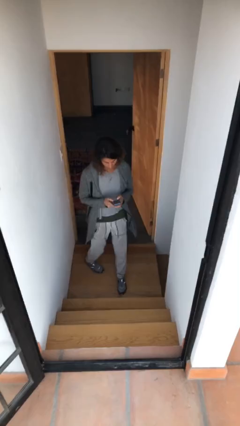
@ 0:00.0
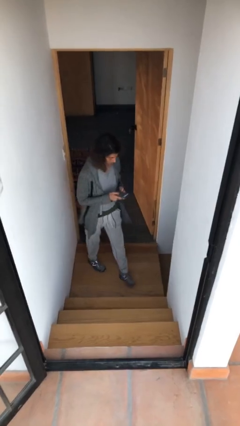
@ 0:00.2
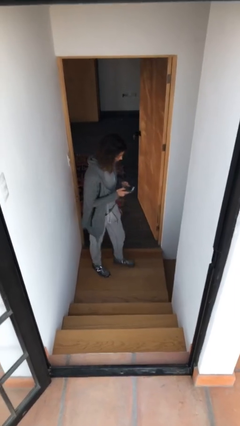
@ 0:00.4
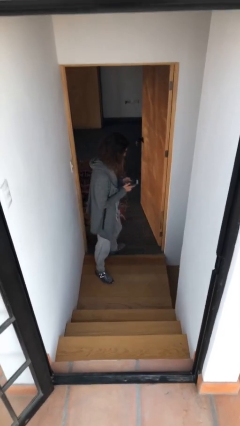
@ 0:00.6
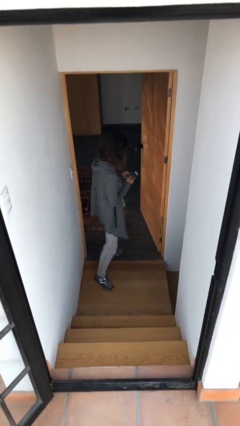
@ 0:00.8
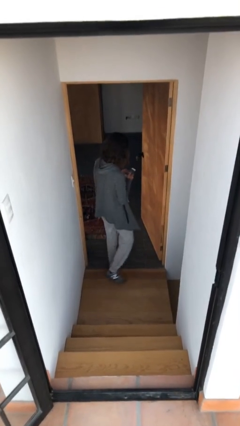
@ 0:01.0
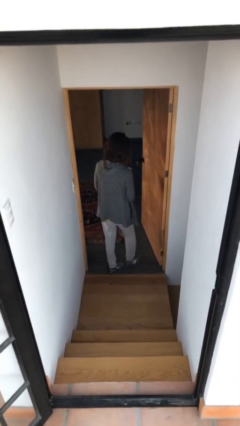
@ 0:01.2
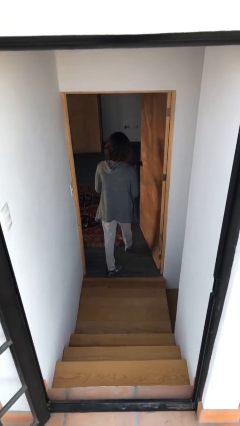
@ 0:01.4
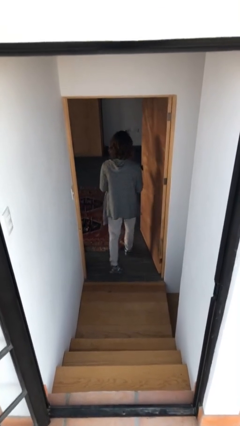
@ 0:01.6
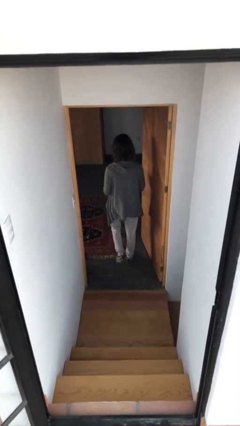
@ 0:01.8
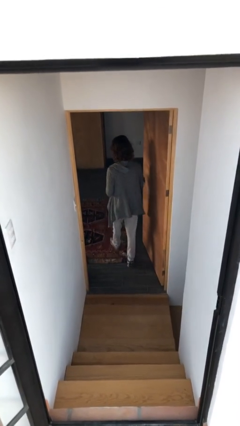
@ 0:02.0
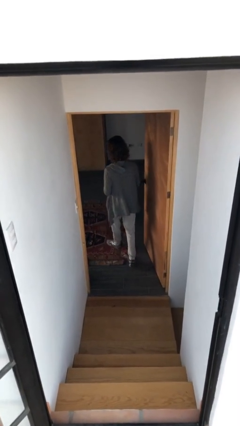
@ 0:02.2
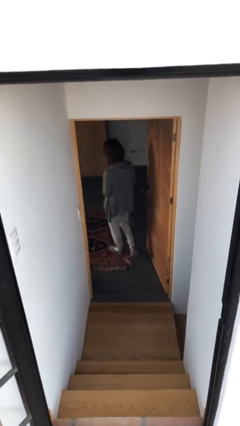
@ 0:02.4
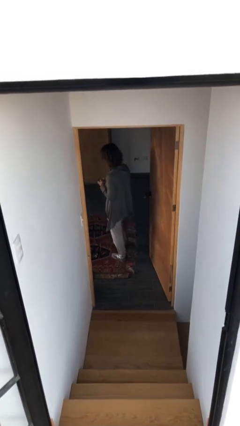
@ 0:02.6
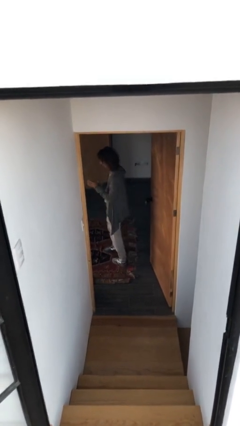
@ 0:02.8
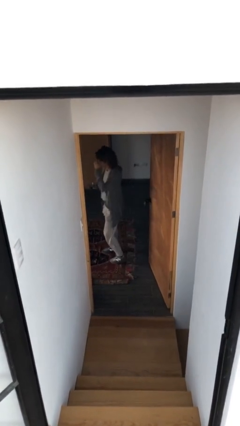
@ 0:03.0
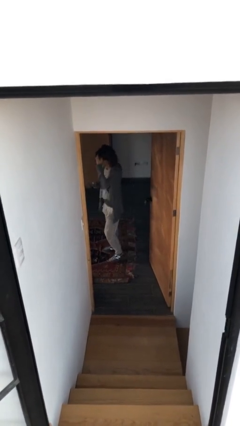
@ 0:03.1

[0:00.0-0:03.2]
person exits scene through structure

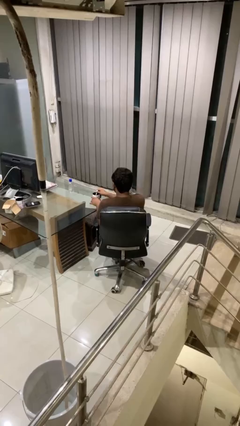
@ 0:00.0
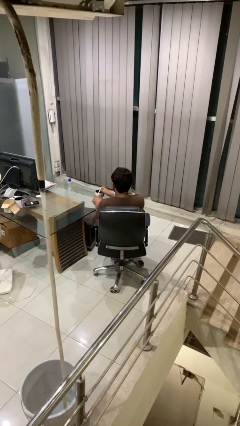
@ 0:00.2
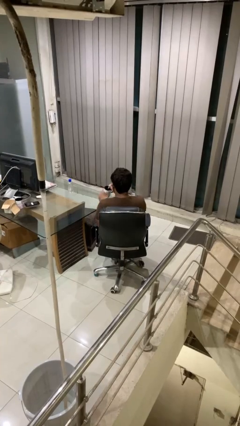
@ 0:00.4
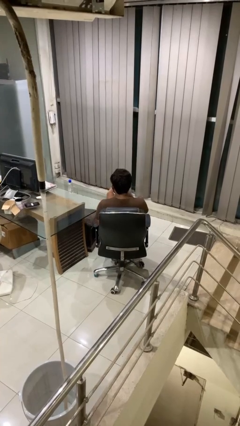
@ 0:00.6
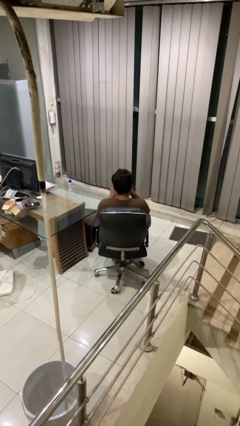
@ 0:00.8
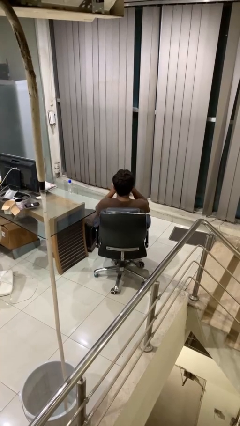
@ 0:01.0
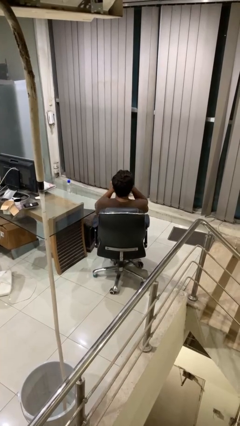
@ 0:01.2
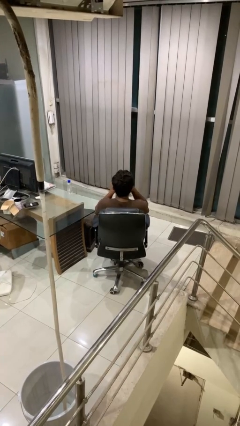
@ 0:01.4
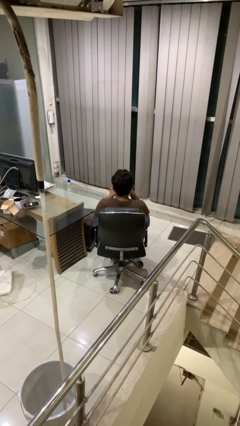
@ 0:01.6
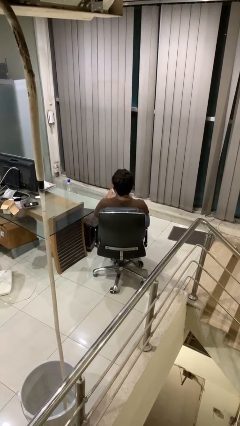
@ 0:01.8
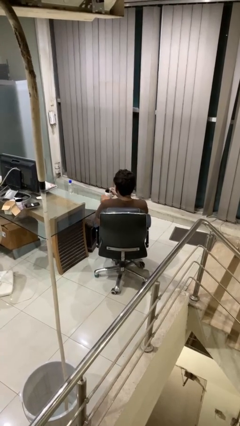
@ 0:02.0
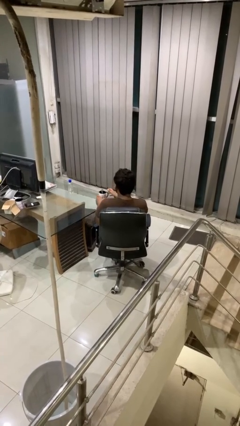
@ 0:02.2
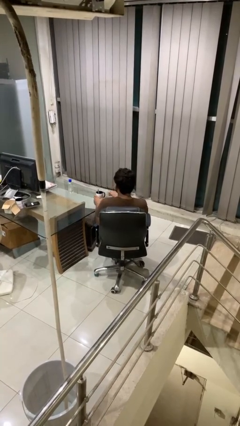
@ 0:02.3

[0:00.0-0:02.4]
person drinks from mug

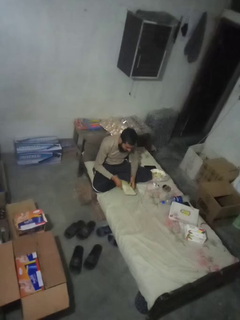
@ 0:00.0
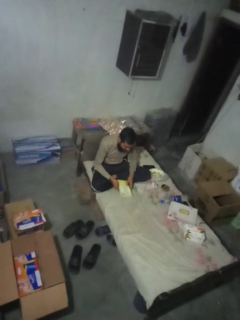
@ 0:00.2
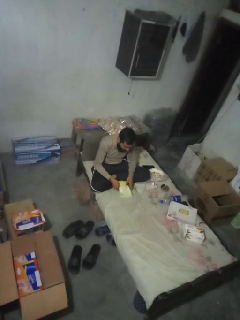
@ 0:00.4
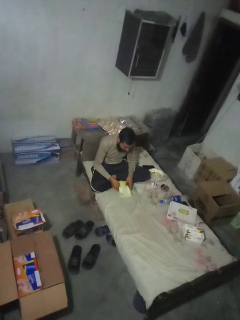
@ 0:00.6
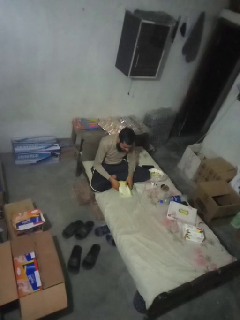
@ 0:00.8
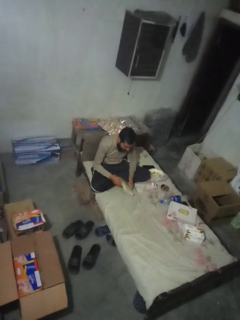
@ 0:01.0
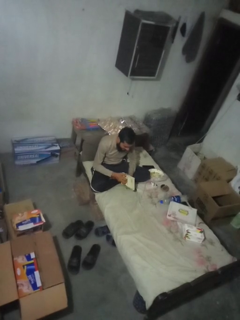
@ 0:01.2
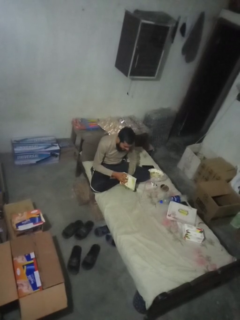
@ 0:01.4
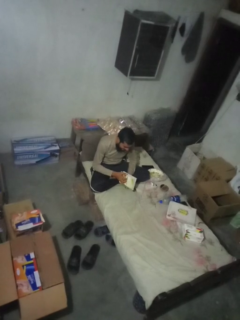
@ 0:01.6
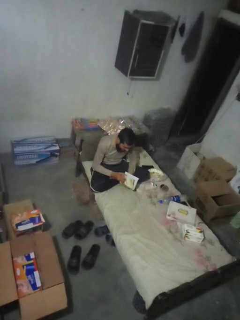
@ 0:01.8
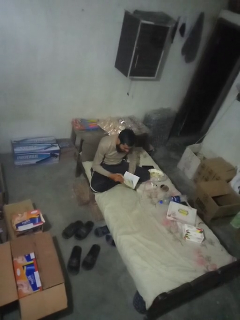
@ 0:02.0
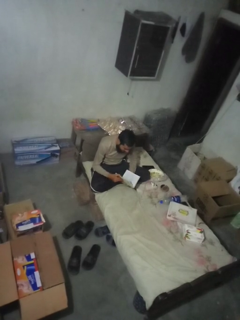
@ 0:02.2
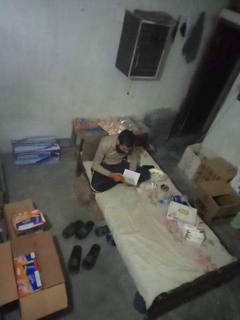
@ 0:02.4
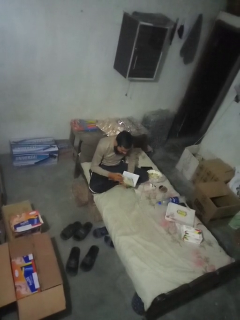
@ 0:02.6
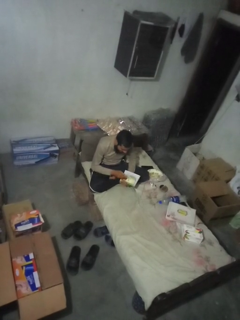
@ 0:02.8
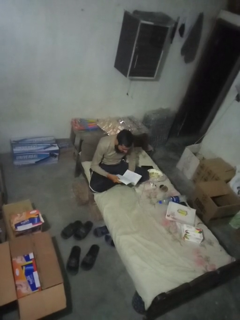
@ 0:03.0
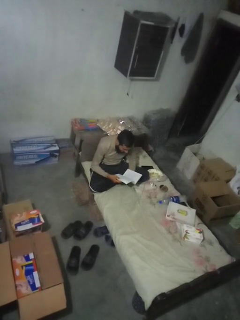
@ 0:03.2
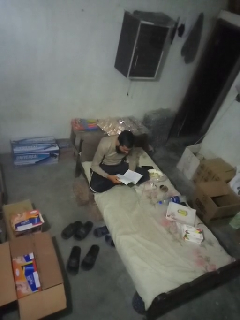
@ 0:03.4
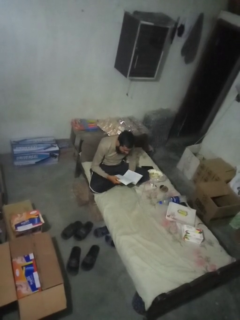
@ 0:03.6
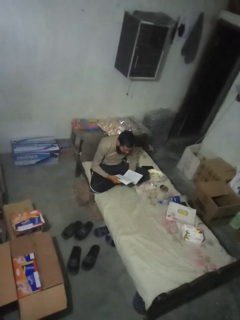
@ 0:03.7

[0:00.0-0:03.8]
person reads book

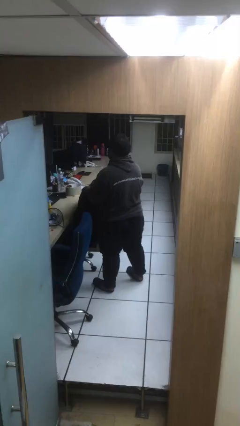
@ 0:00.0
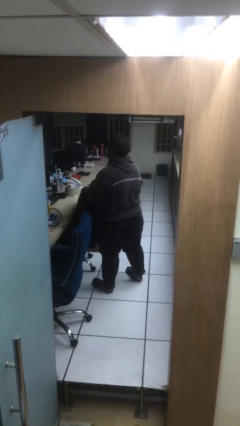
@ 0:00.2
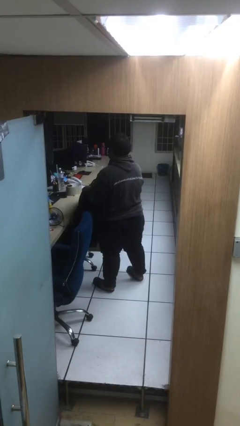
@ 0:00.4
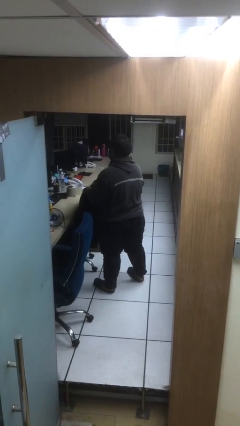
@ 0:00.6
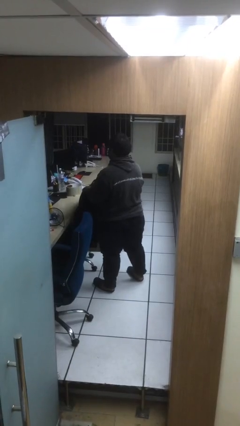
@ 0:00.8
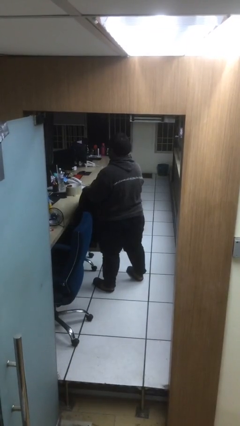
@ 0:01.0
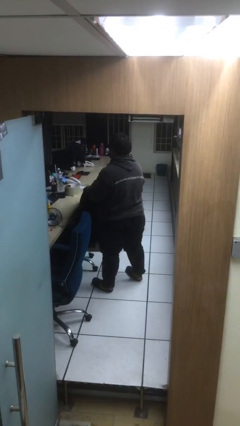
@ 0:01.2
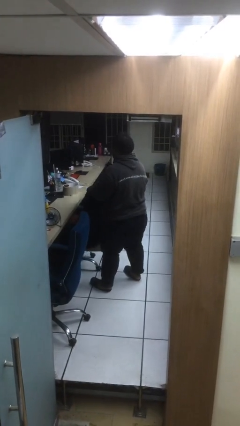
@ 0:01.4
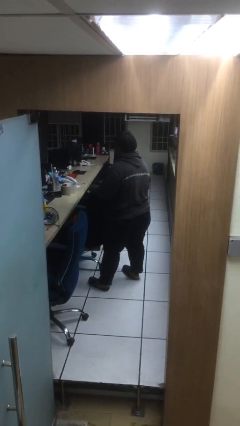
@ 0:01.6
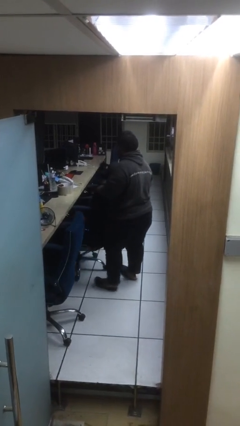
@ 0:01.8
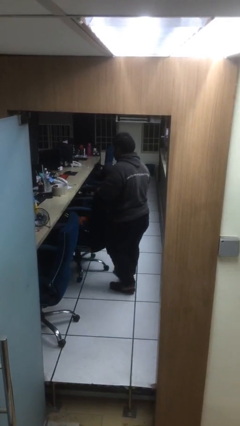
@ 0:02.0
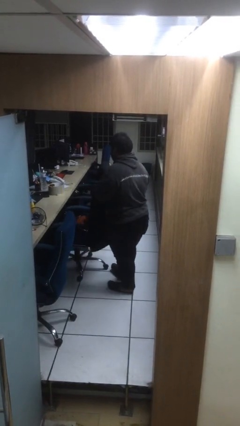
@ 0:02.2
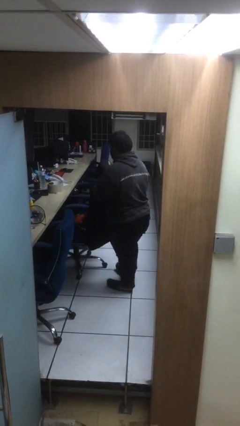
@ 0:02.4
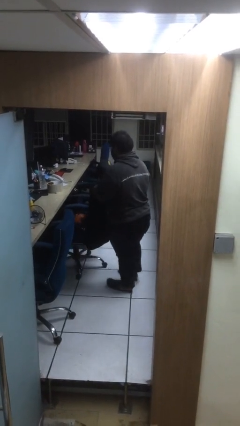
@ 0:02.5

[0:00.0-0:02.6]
person pulls out chair

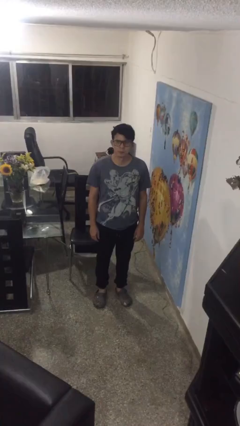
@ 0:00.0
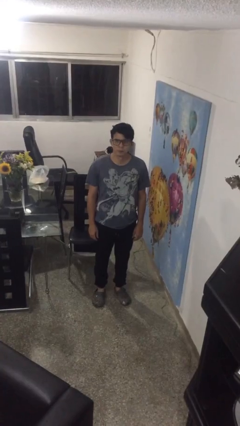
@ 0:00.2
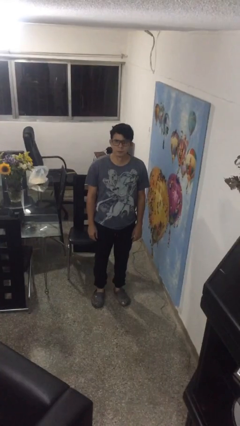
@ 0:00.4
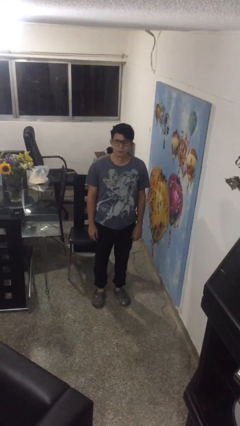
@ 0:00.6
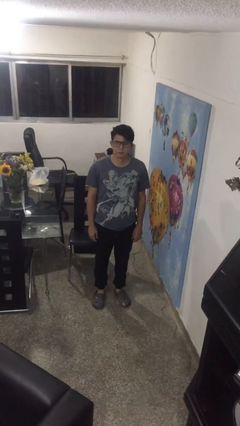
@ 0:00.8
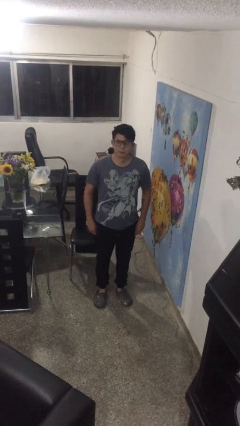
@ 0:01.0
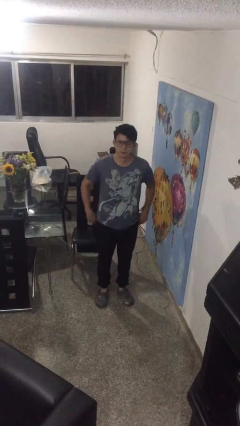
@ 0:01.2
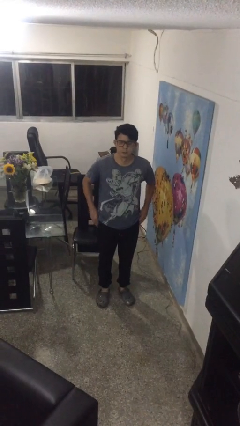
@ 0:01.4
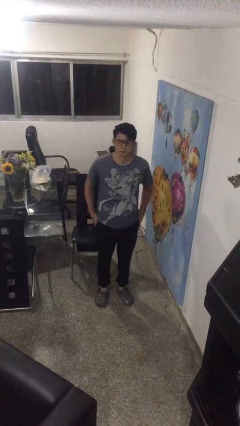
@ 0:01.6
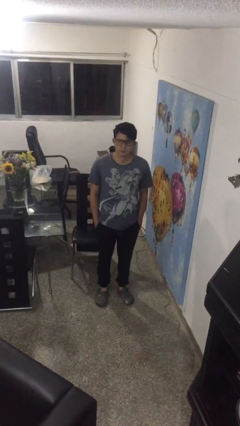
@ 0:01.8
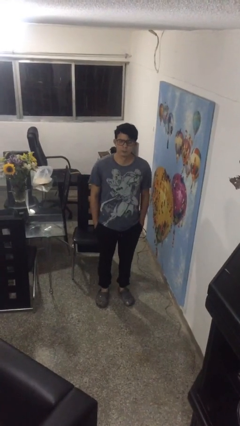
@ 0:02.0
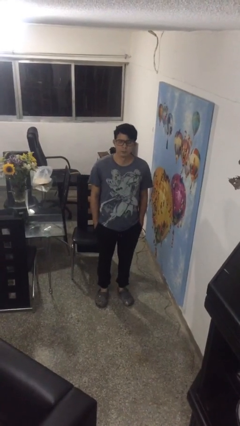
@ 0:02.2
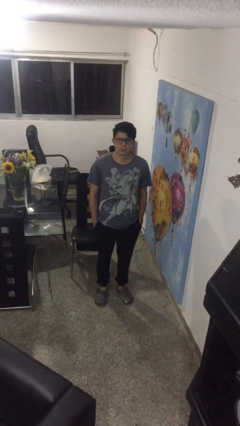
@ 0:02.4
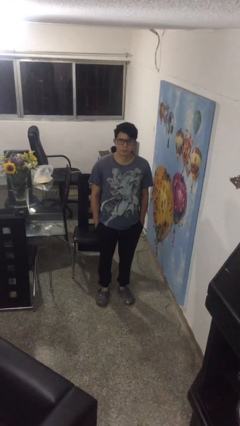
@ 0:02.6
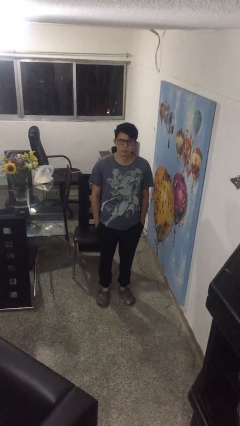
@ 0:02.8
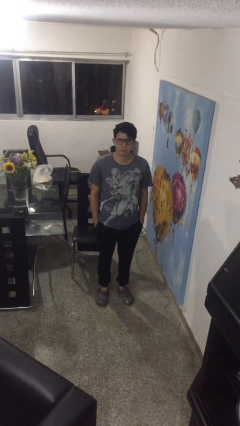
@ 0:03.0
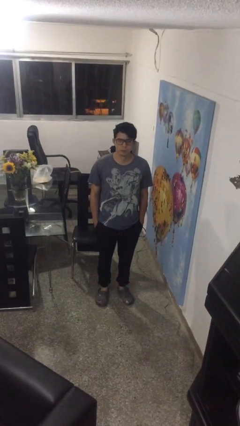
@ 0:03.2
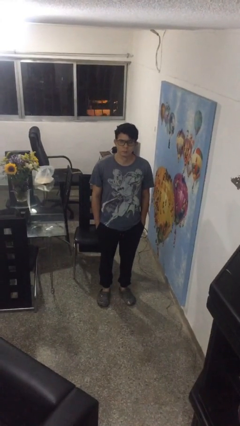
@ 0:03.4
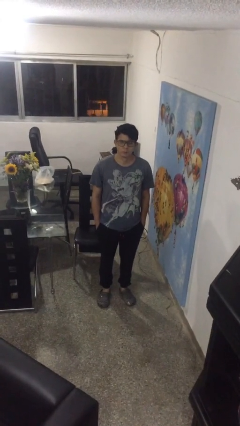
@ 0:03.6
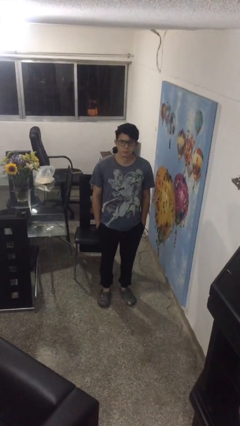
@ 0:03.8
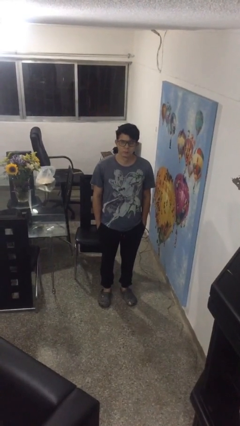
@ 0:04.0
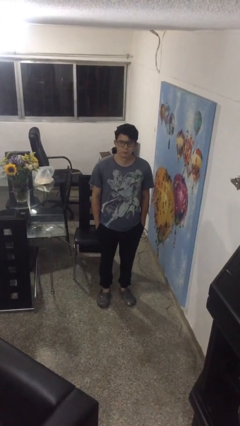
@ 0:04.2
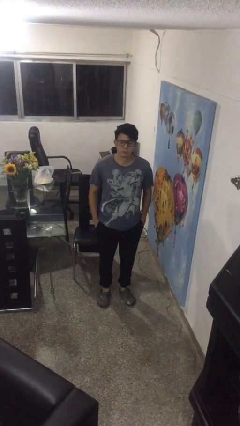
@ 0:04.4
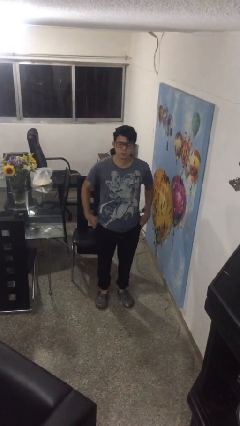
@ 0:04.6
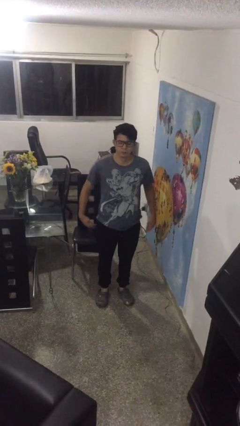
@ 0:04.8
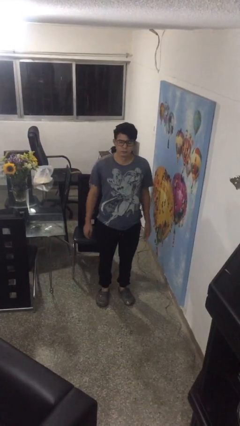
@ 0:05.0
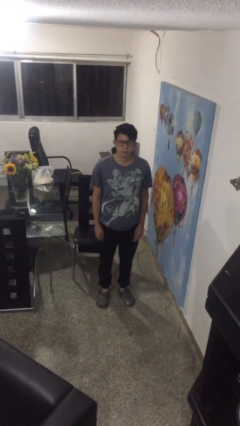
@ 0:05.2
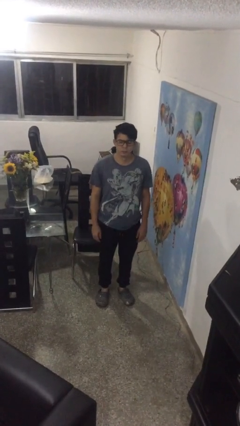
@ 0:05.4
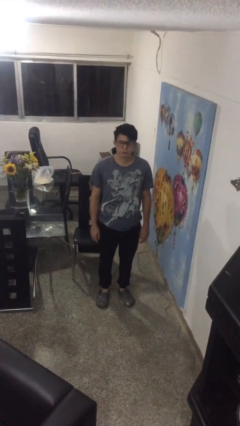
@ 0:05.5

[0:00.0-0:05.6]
person puts hands in back pockets

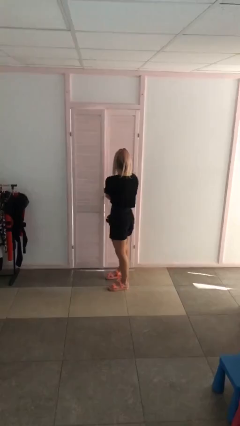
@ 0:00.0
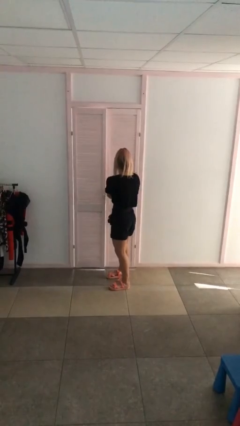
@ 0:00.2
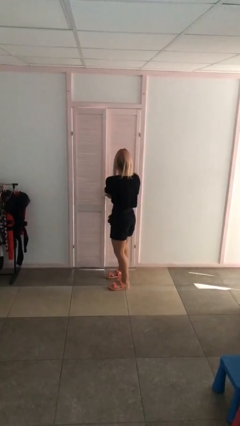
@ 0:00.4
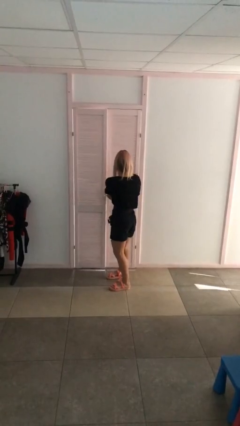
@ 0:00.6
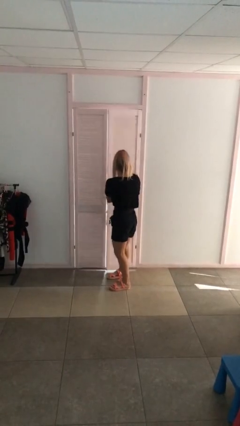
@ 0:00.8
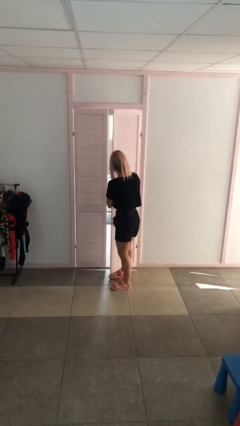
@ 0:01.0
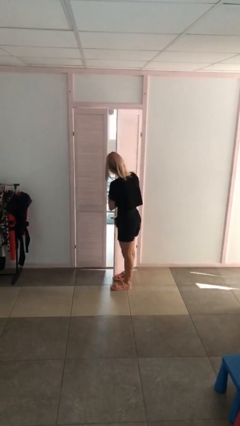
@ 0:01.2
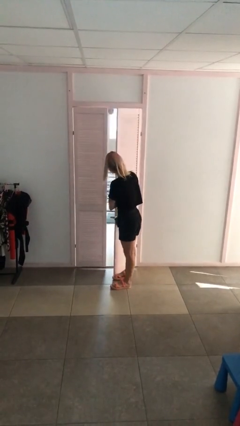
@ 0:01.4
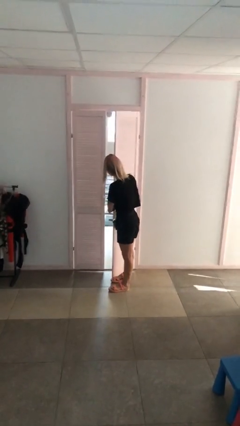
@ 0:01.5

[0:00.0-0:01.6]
person opens facility door
